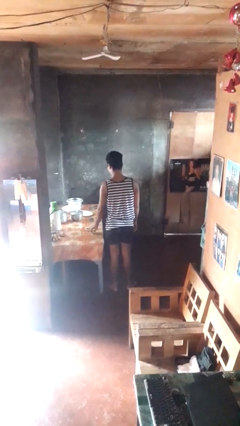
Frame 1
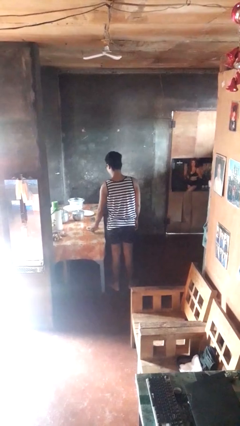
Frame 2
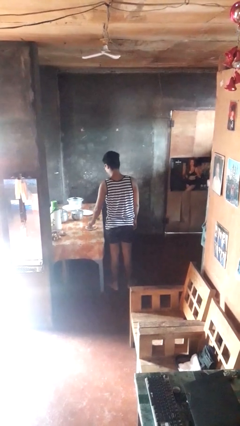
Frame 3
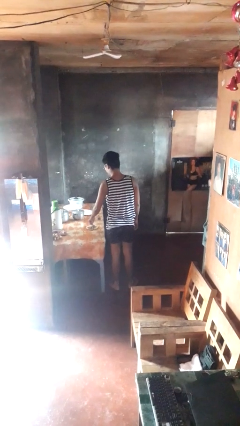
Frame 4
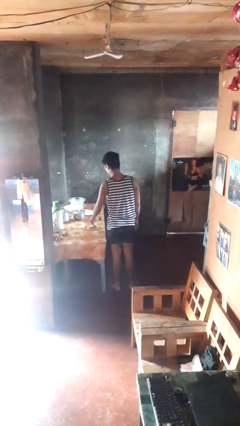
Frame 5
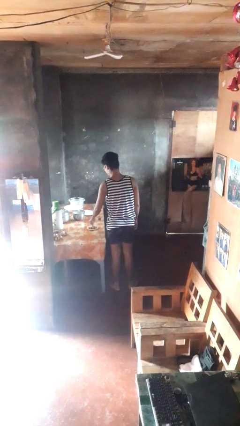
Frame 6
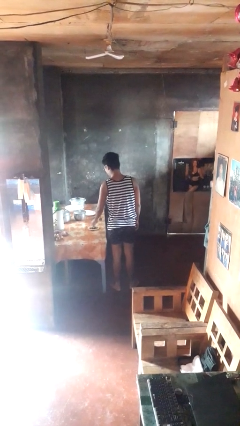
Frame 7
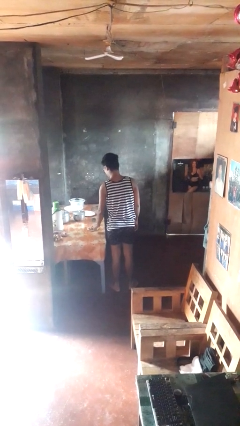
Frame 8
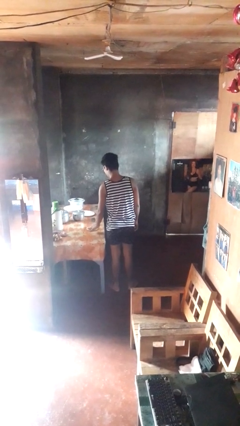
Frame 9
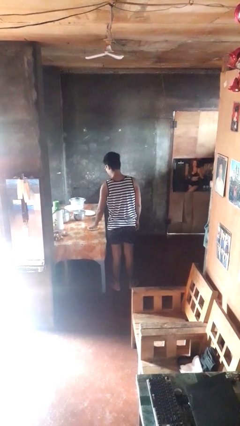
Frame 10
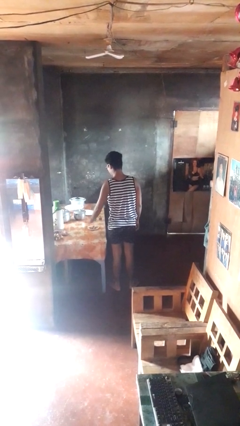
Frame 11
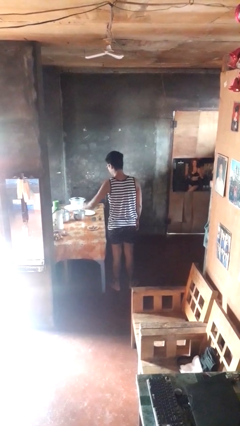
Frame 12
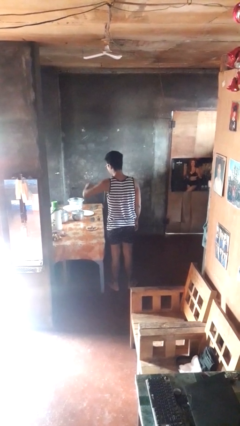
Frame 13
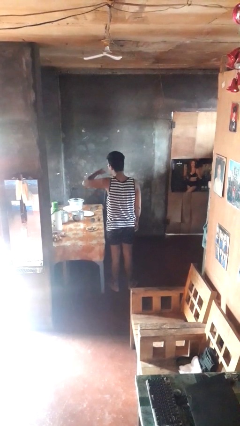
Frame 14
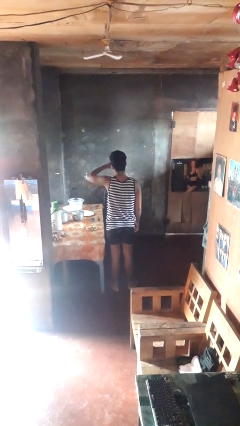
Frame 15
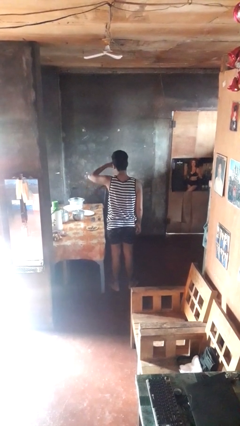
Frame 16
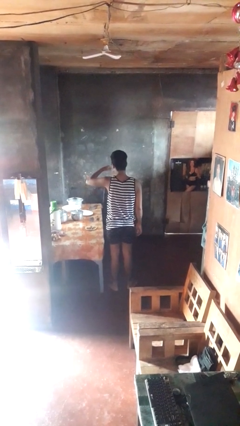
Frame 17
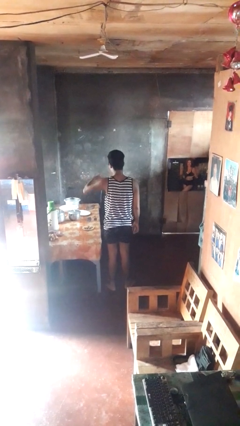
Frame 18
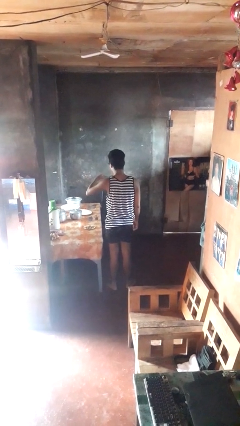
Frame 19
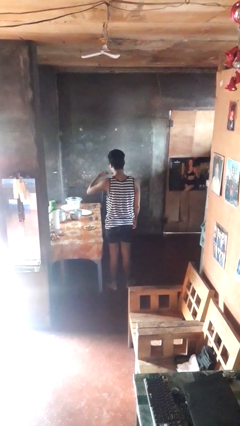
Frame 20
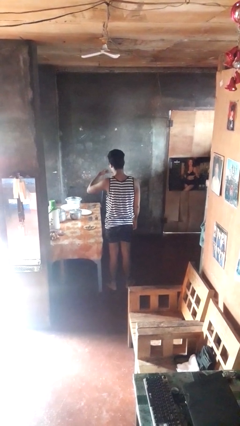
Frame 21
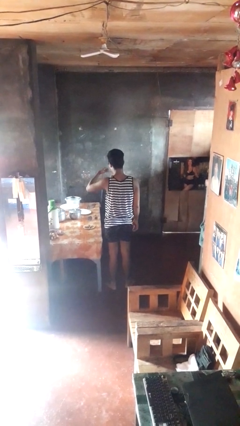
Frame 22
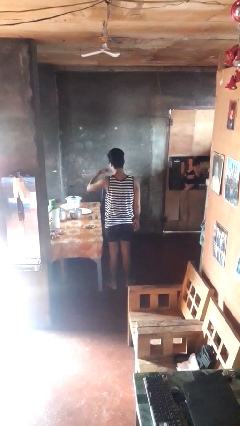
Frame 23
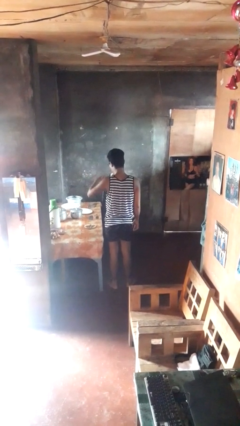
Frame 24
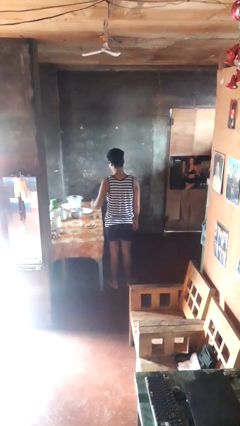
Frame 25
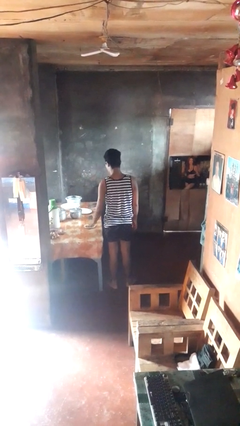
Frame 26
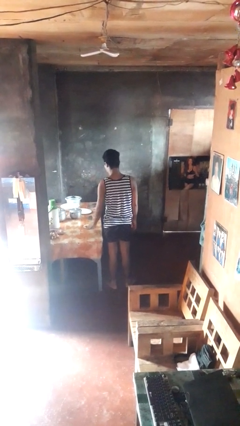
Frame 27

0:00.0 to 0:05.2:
person eats with utensil

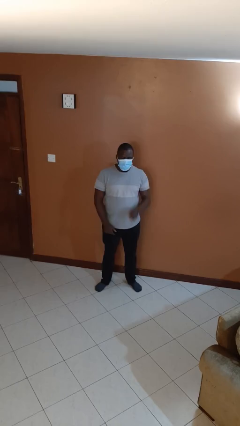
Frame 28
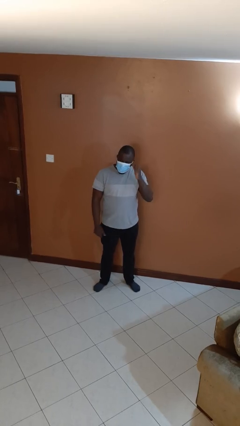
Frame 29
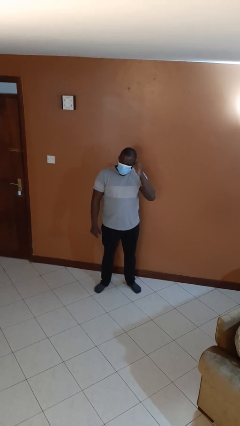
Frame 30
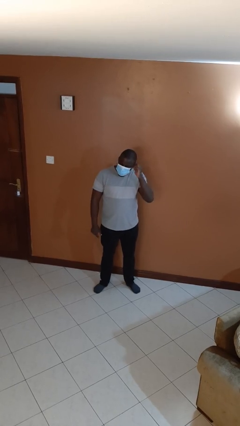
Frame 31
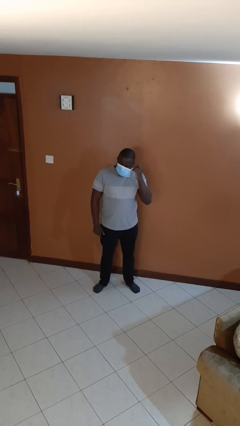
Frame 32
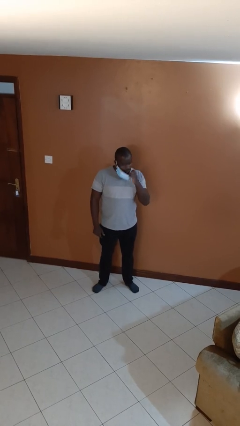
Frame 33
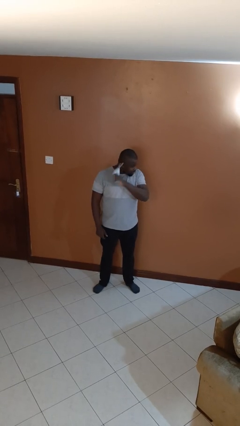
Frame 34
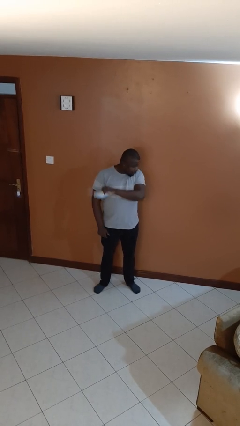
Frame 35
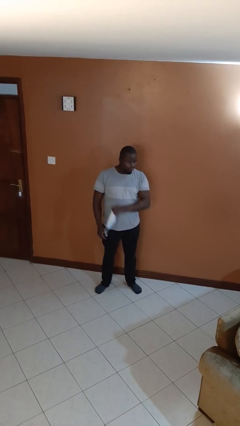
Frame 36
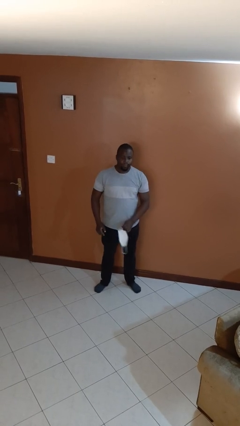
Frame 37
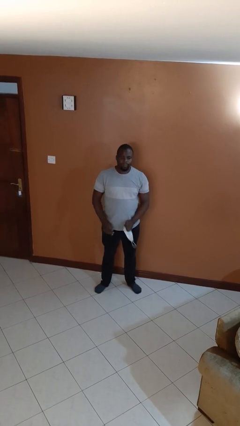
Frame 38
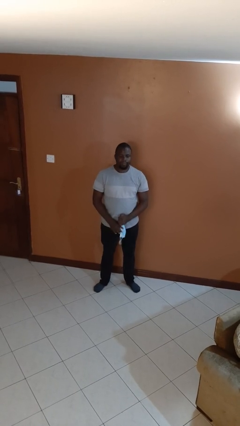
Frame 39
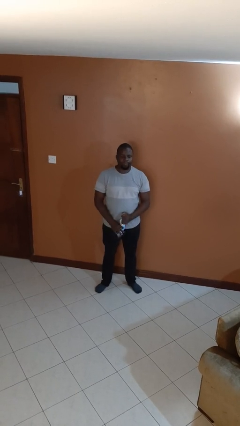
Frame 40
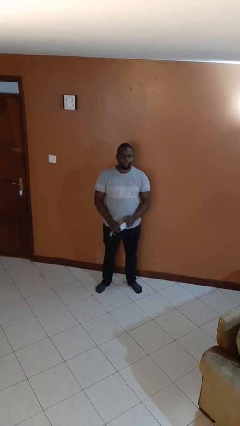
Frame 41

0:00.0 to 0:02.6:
person takes off facemask

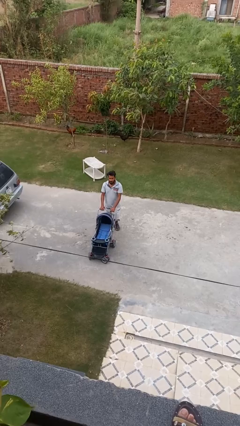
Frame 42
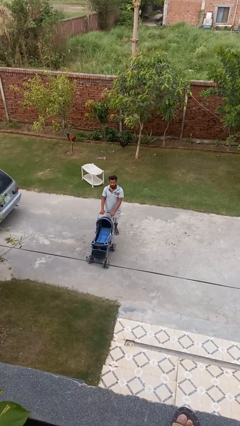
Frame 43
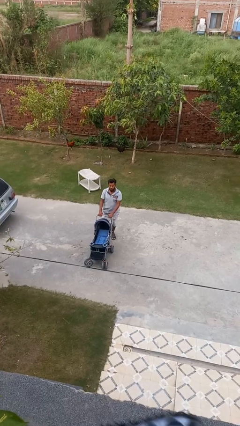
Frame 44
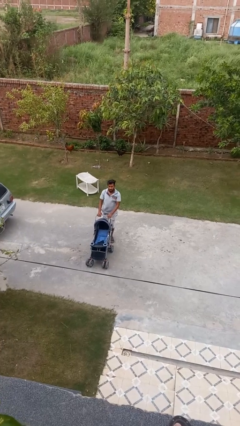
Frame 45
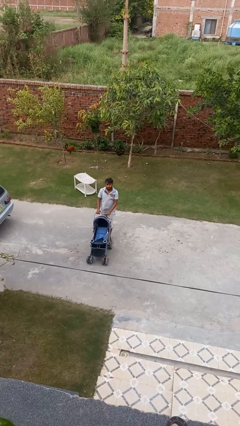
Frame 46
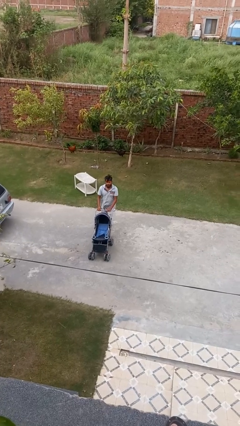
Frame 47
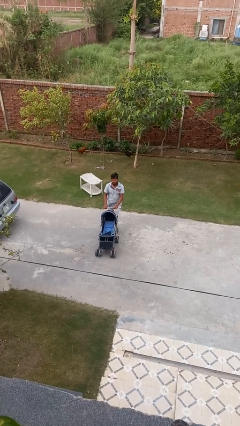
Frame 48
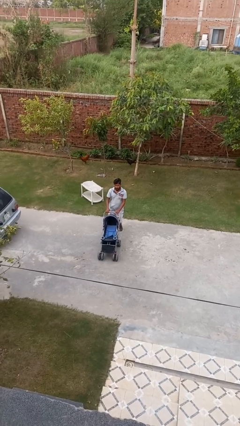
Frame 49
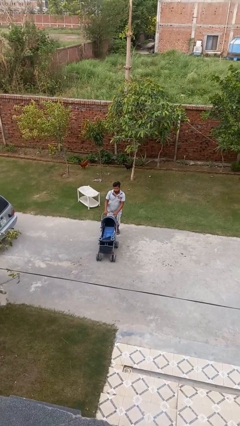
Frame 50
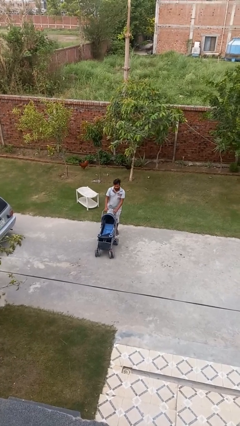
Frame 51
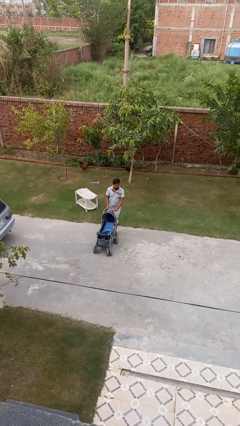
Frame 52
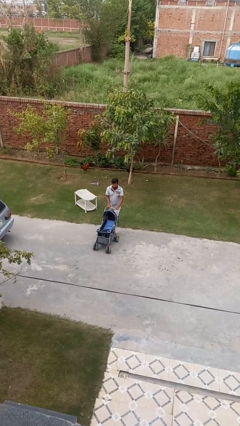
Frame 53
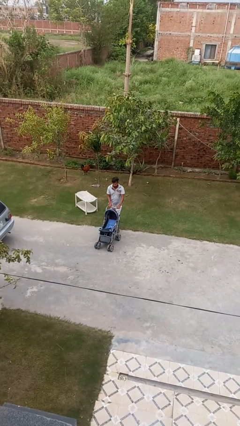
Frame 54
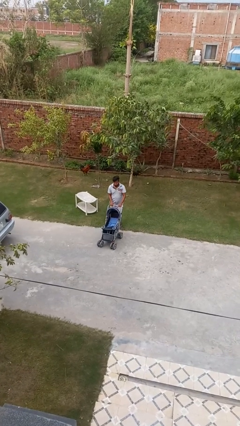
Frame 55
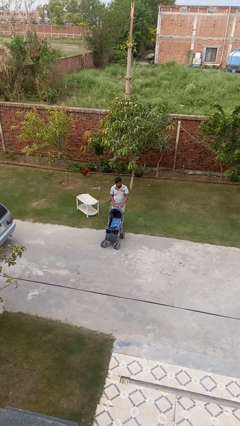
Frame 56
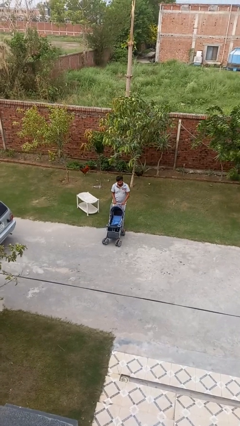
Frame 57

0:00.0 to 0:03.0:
person pulls wheeled cart

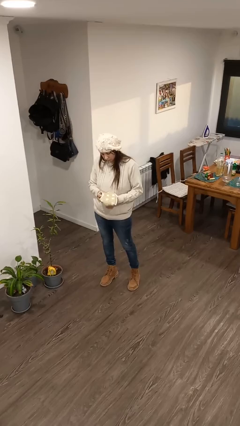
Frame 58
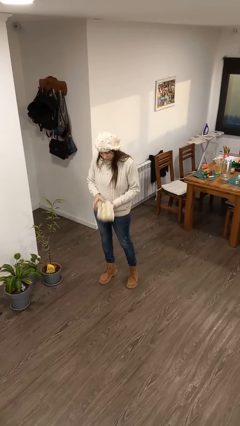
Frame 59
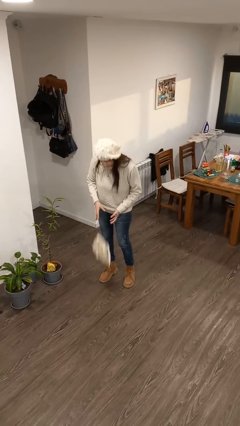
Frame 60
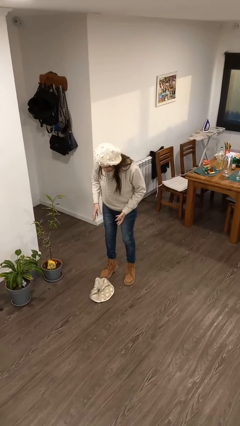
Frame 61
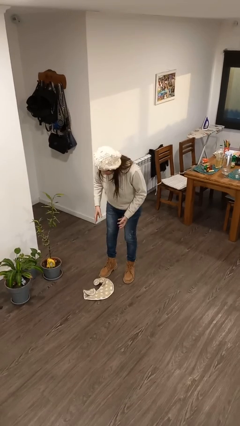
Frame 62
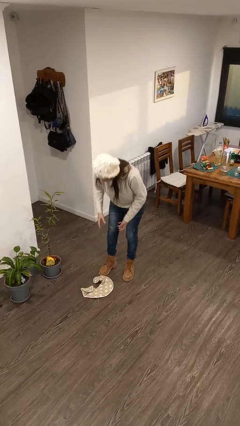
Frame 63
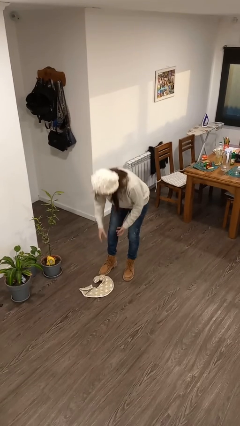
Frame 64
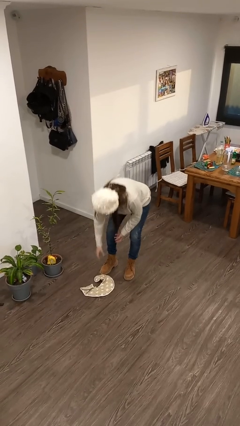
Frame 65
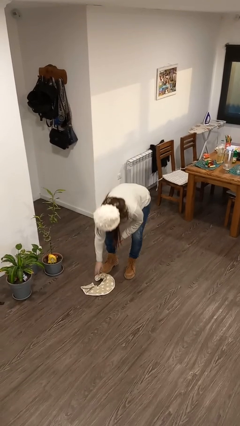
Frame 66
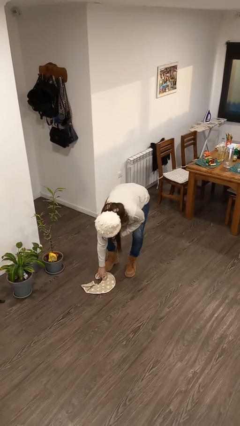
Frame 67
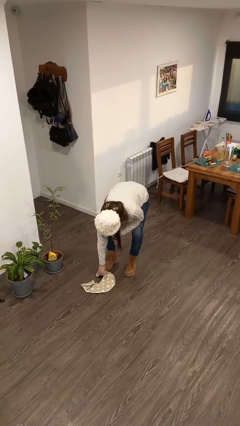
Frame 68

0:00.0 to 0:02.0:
person drops object

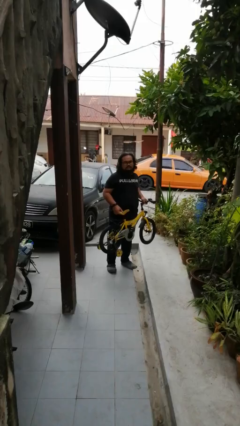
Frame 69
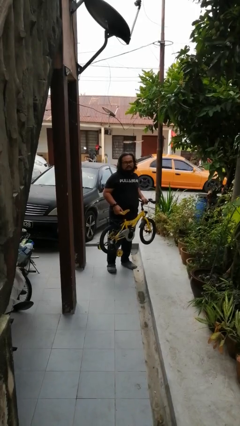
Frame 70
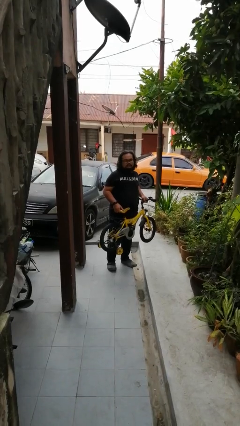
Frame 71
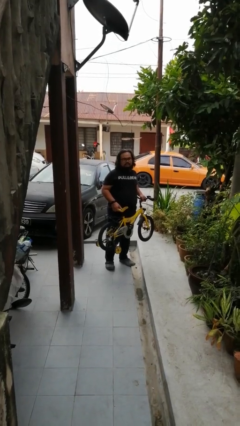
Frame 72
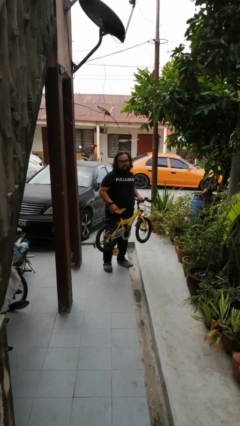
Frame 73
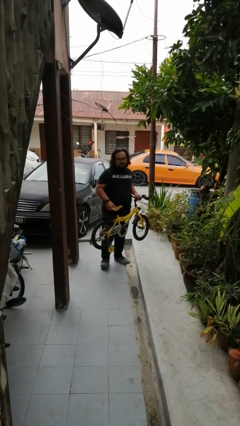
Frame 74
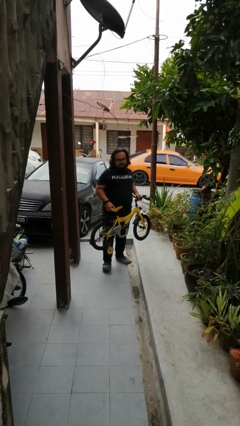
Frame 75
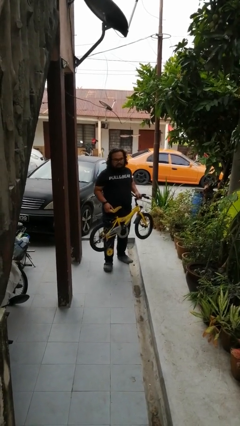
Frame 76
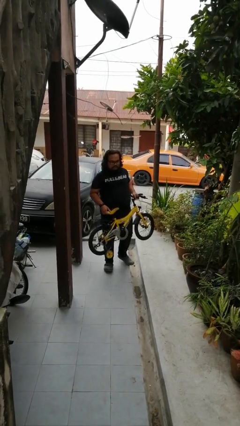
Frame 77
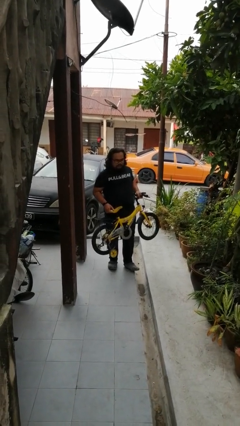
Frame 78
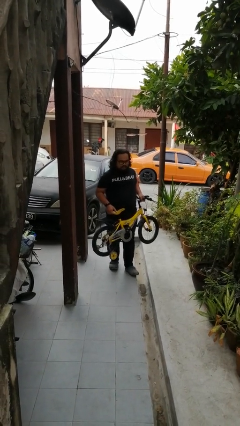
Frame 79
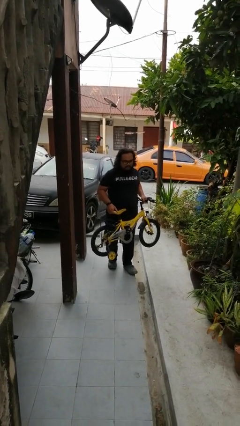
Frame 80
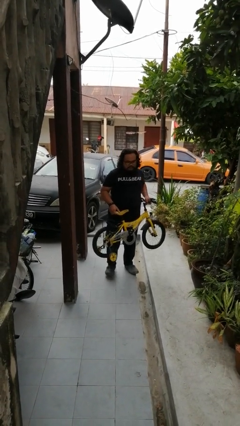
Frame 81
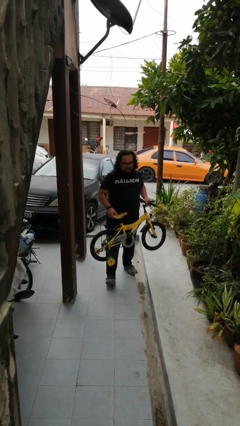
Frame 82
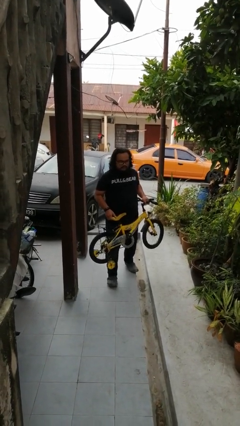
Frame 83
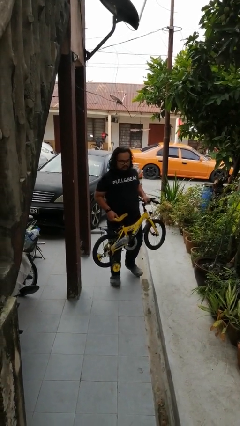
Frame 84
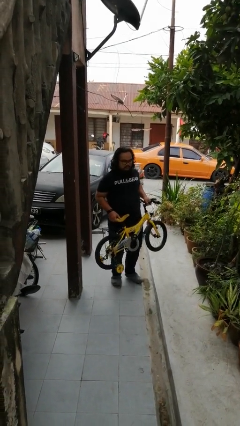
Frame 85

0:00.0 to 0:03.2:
person carries bicycle

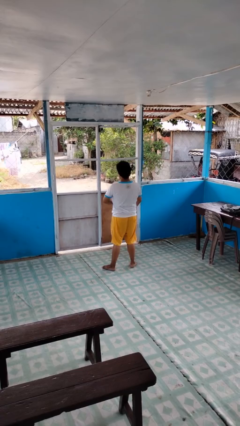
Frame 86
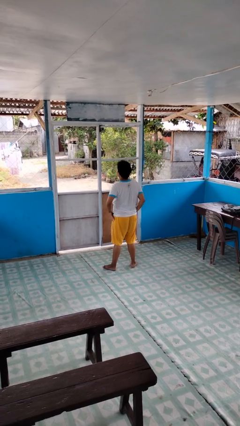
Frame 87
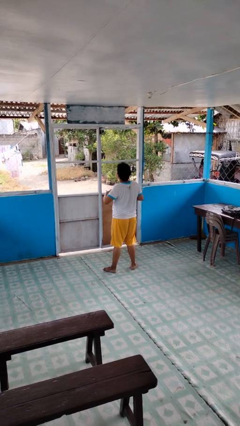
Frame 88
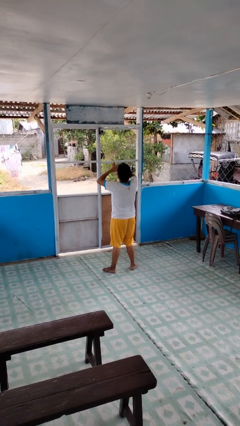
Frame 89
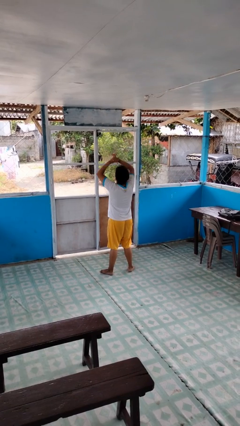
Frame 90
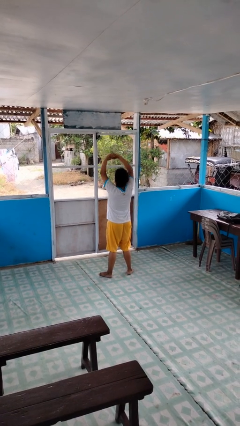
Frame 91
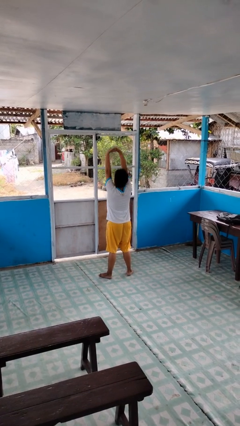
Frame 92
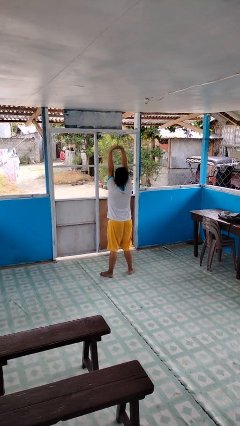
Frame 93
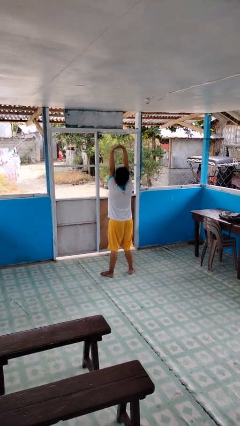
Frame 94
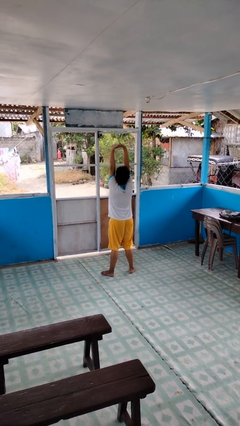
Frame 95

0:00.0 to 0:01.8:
person stretches arms over head
